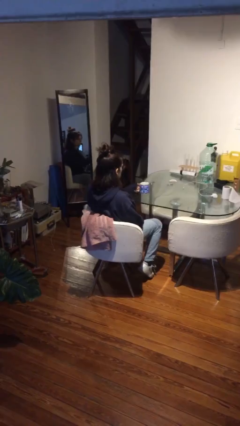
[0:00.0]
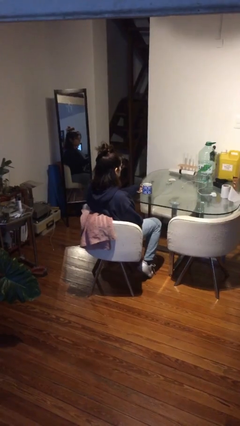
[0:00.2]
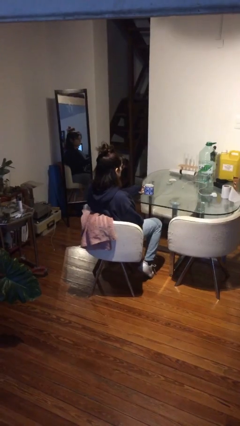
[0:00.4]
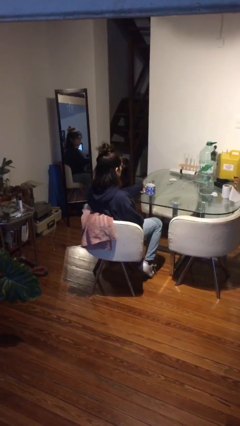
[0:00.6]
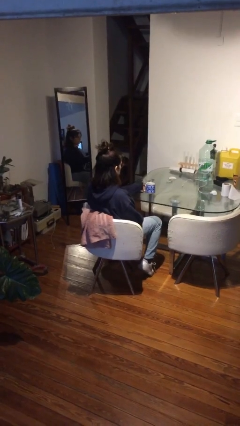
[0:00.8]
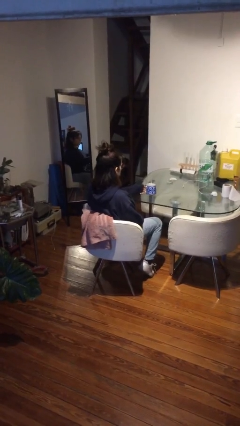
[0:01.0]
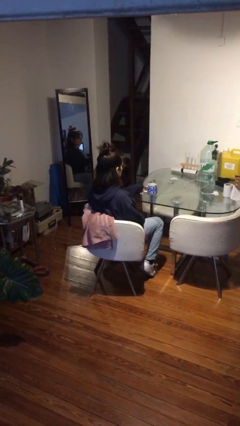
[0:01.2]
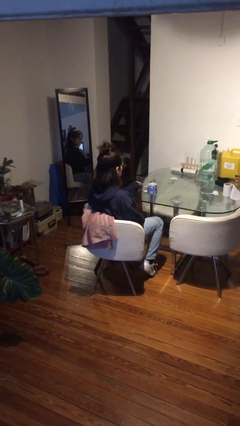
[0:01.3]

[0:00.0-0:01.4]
person puts down object on table

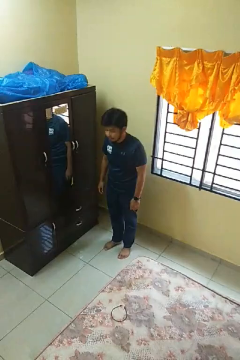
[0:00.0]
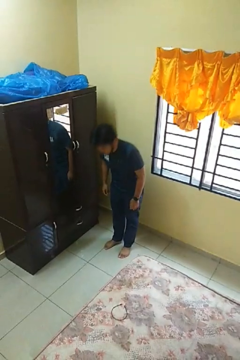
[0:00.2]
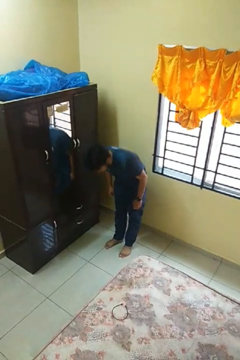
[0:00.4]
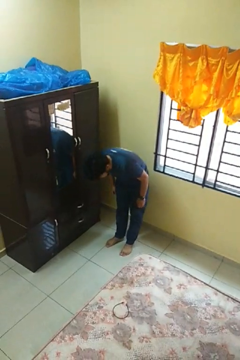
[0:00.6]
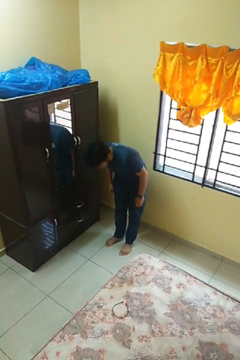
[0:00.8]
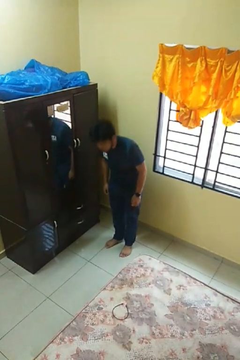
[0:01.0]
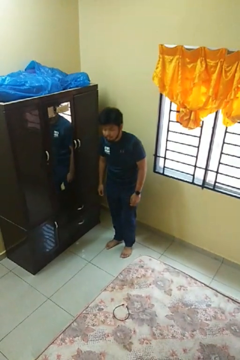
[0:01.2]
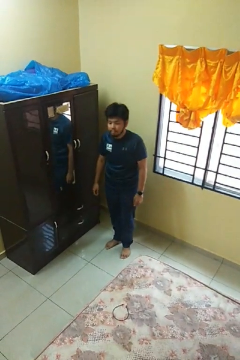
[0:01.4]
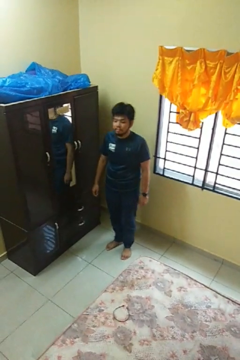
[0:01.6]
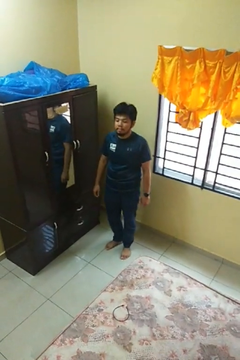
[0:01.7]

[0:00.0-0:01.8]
person bows

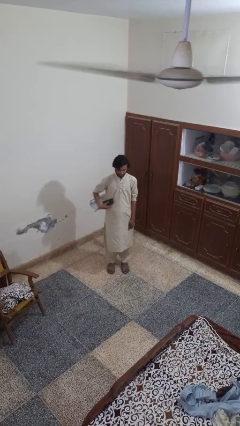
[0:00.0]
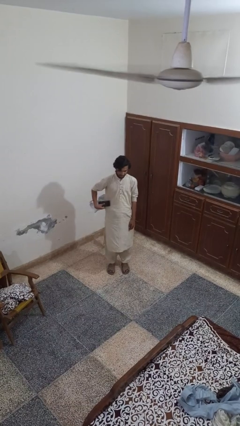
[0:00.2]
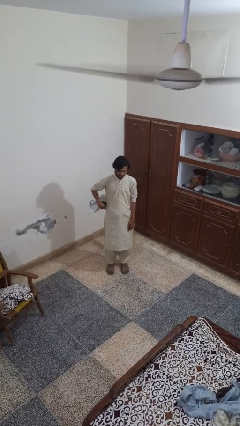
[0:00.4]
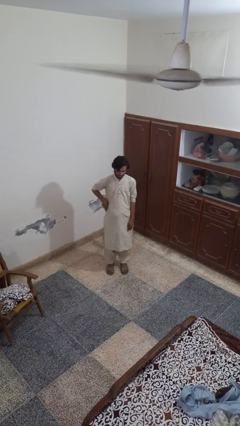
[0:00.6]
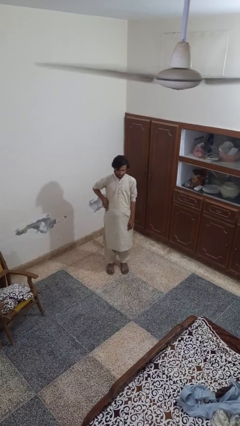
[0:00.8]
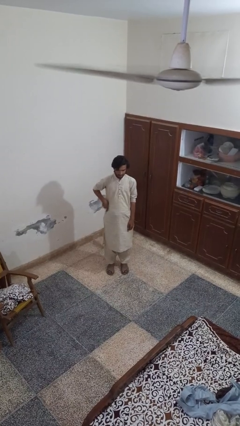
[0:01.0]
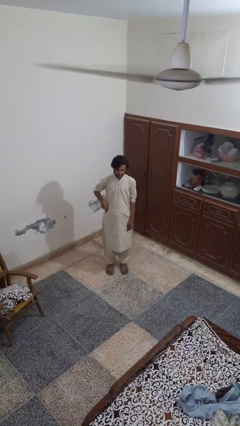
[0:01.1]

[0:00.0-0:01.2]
person puts phone into pocket

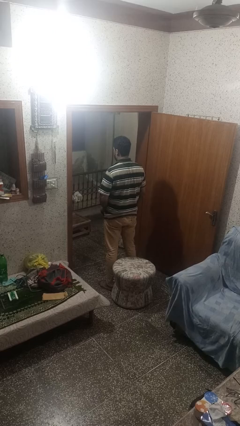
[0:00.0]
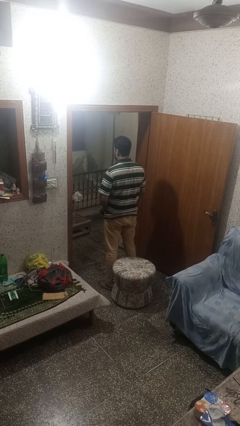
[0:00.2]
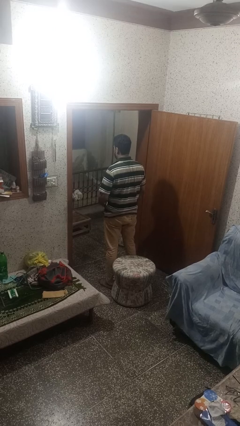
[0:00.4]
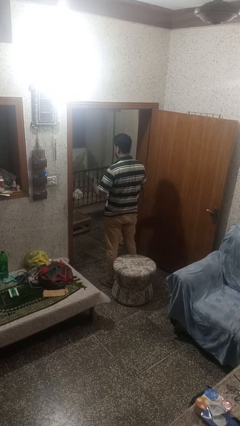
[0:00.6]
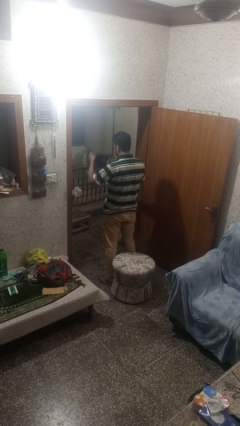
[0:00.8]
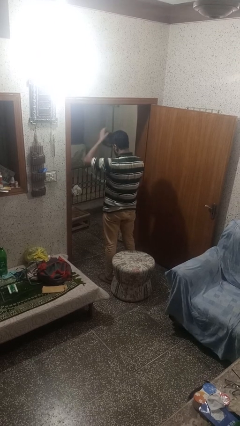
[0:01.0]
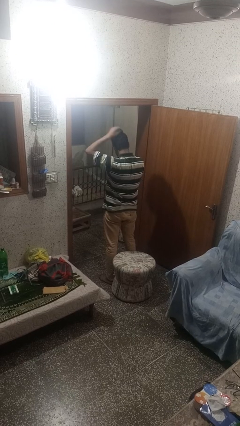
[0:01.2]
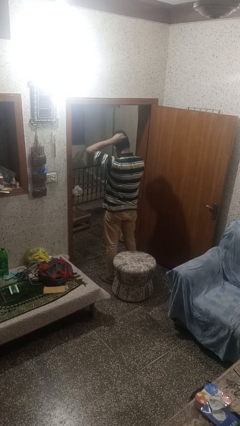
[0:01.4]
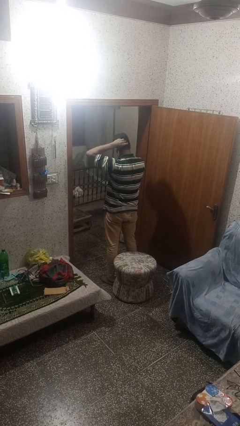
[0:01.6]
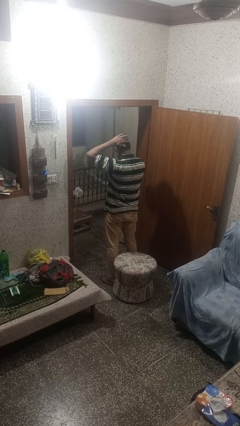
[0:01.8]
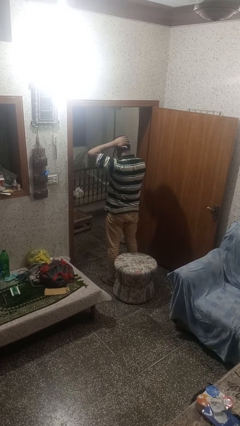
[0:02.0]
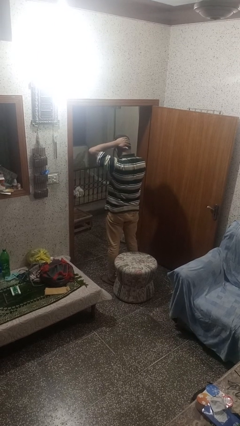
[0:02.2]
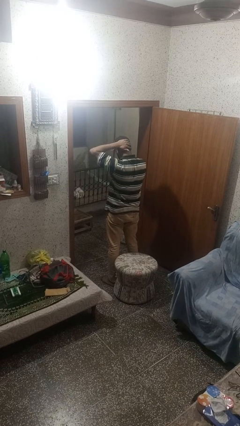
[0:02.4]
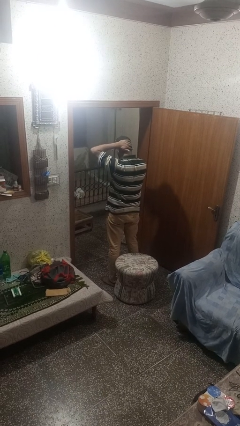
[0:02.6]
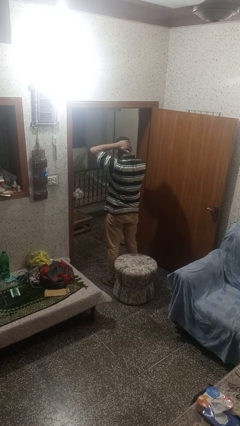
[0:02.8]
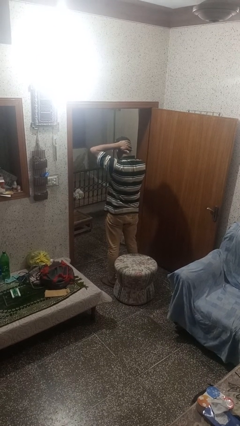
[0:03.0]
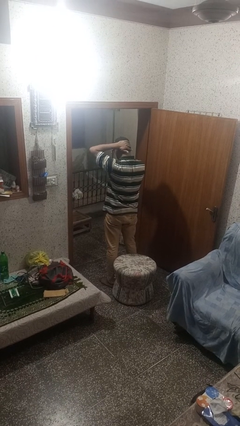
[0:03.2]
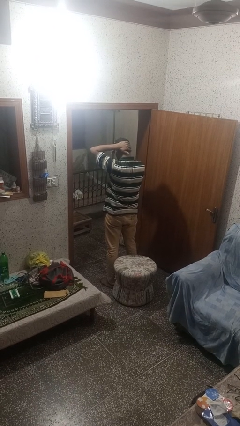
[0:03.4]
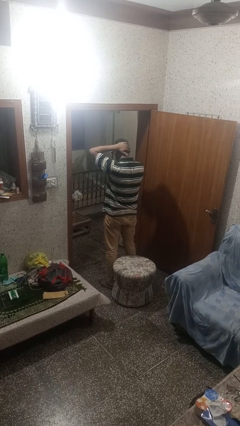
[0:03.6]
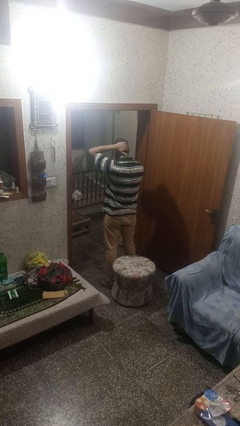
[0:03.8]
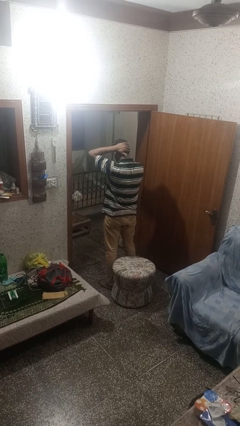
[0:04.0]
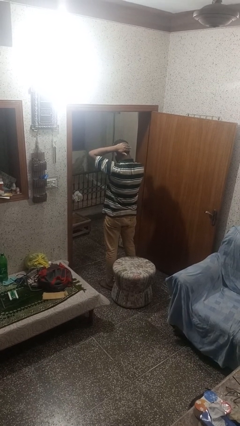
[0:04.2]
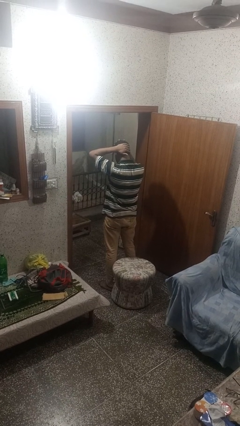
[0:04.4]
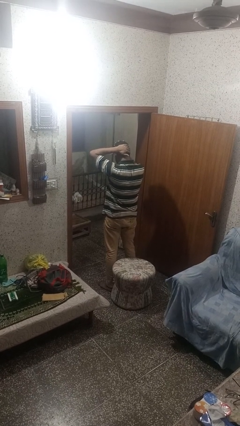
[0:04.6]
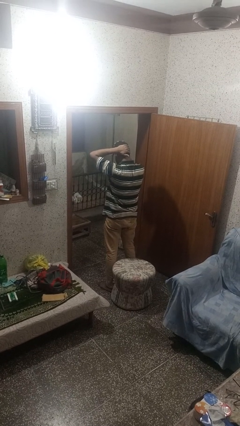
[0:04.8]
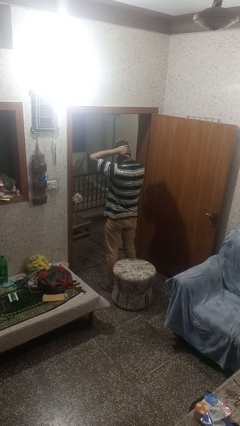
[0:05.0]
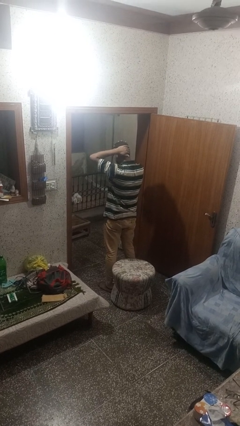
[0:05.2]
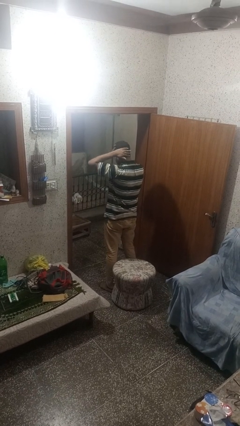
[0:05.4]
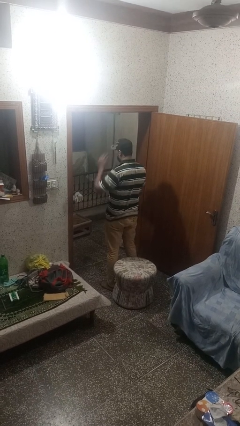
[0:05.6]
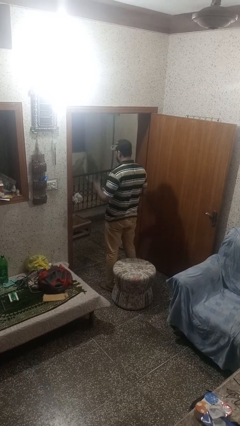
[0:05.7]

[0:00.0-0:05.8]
person puts on hat

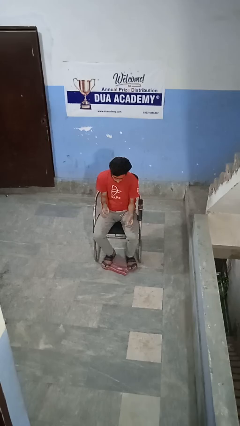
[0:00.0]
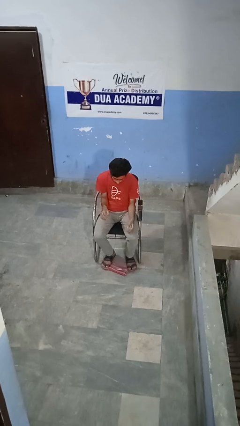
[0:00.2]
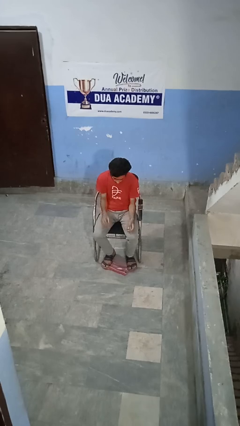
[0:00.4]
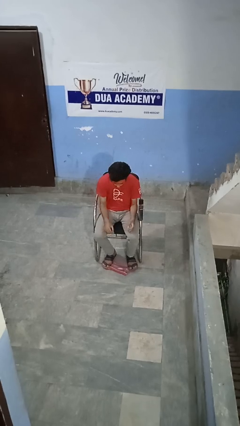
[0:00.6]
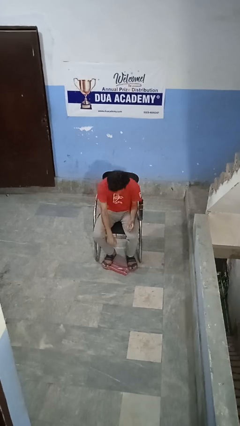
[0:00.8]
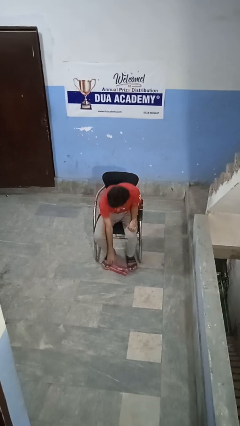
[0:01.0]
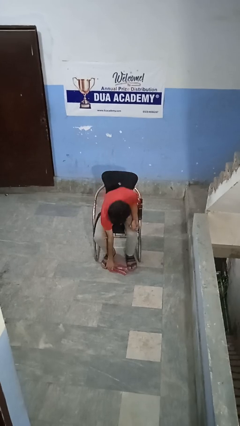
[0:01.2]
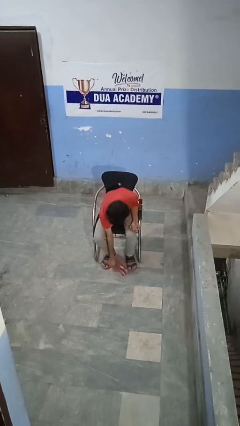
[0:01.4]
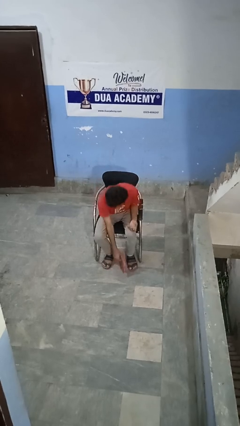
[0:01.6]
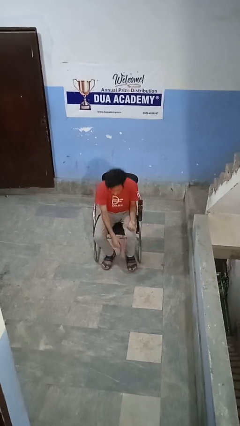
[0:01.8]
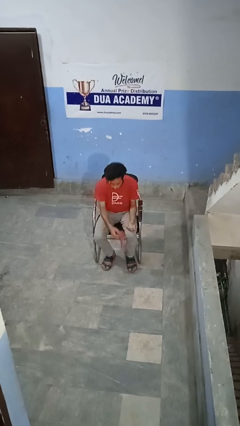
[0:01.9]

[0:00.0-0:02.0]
person picks up object from floor

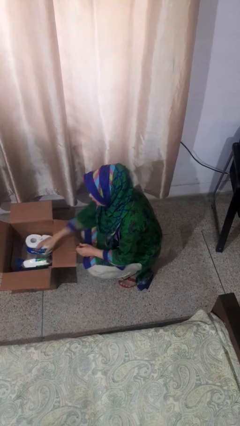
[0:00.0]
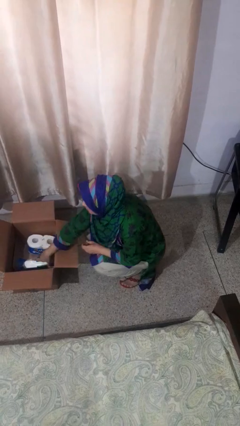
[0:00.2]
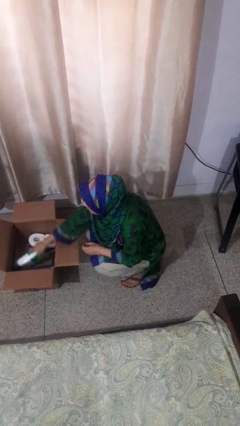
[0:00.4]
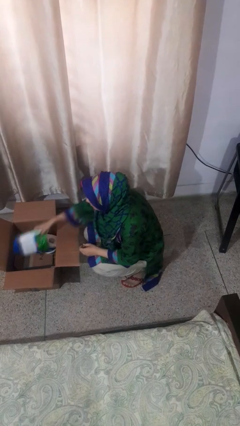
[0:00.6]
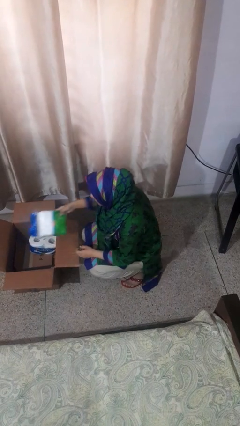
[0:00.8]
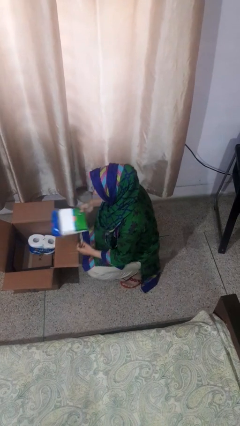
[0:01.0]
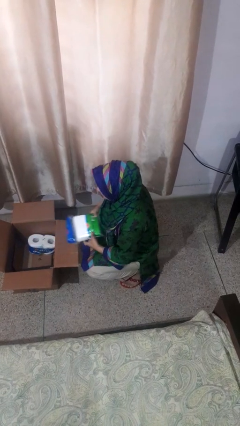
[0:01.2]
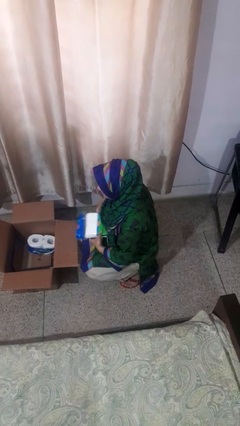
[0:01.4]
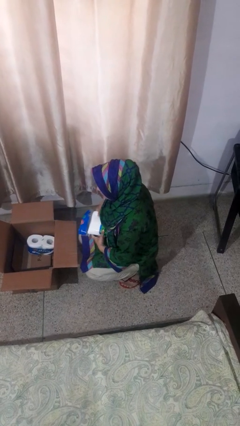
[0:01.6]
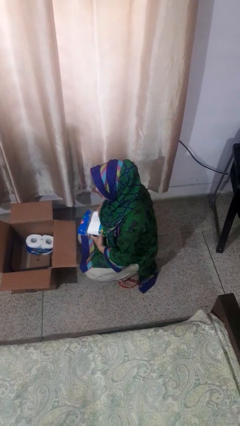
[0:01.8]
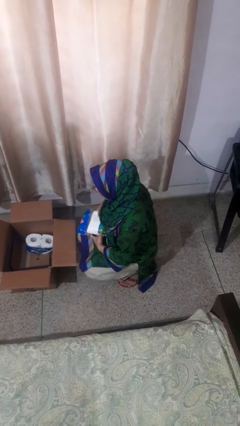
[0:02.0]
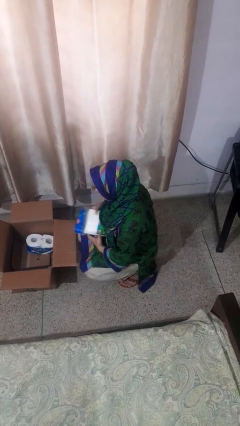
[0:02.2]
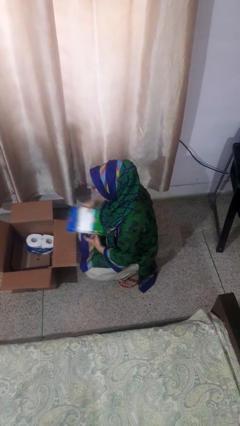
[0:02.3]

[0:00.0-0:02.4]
person takes object from box

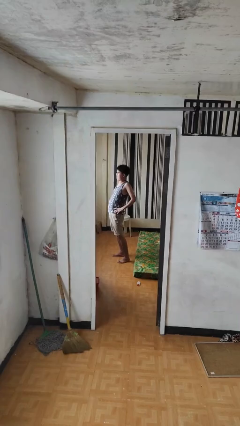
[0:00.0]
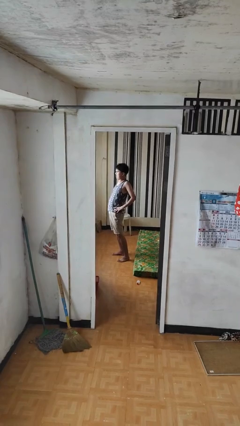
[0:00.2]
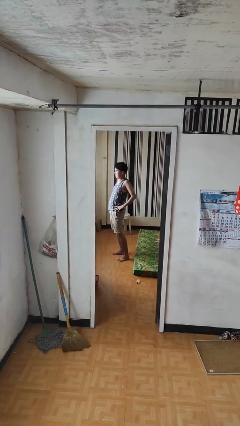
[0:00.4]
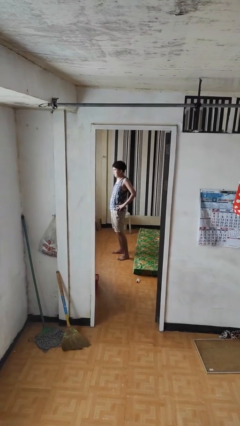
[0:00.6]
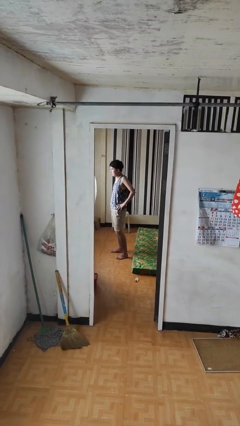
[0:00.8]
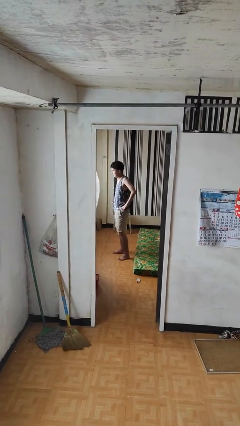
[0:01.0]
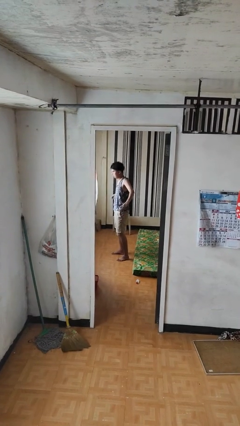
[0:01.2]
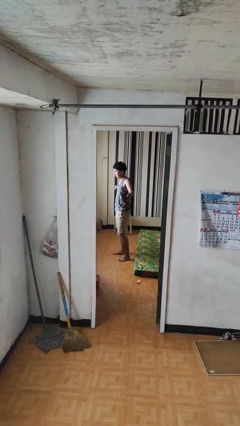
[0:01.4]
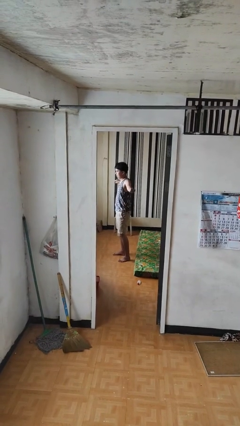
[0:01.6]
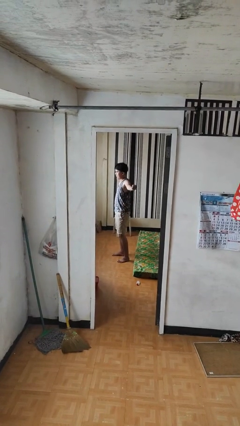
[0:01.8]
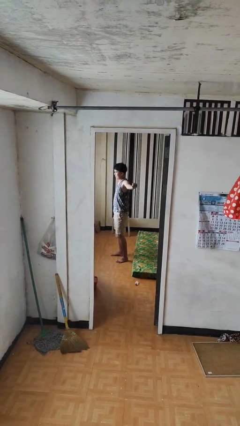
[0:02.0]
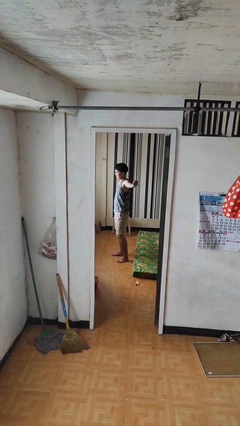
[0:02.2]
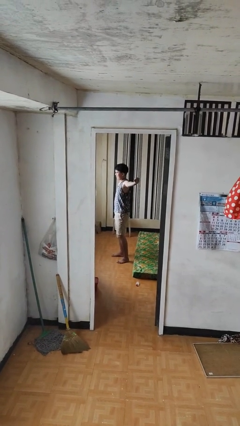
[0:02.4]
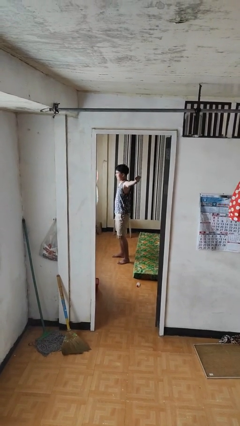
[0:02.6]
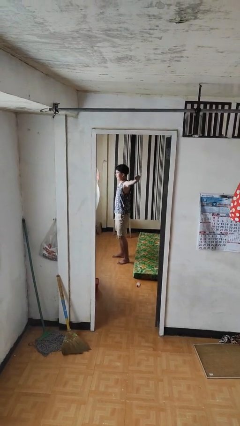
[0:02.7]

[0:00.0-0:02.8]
person stretches arms to side

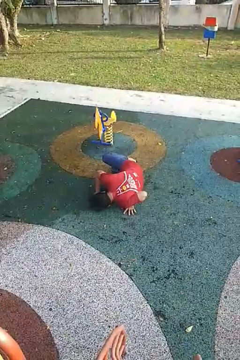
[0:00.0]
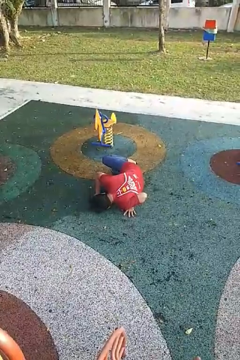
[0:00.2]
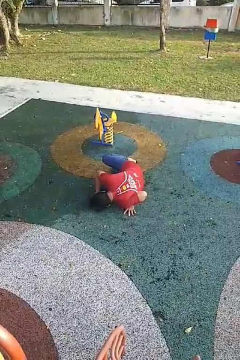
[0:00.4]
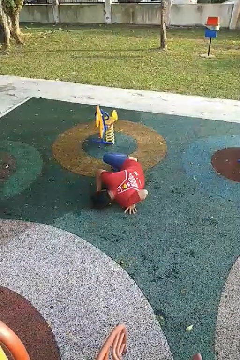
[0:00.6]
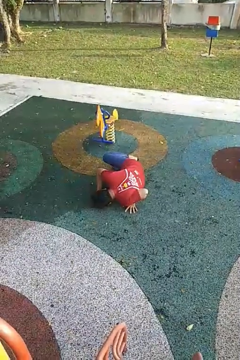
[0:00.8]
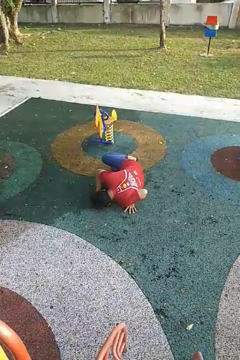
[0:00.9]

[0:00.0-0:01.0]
person lies down on floor
